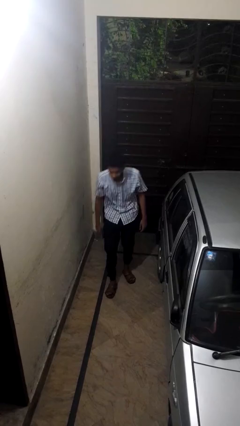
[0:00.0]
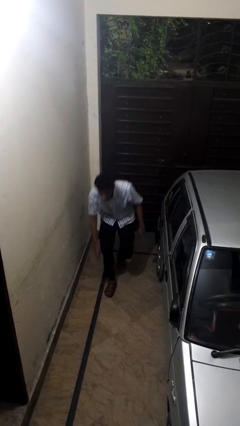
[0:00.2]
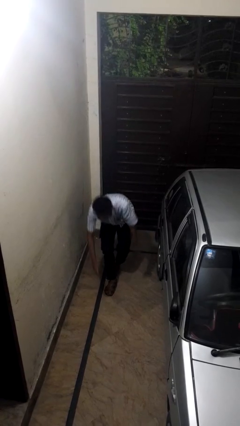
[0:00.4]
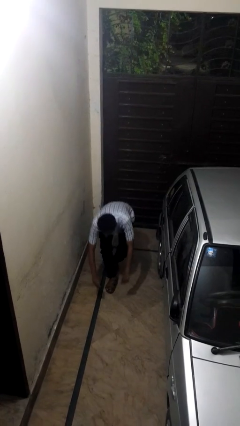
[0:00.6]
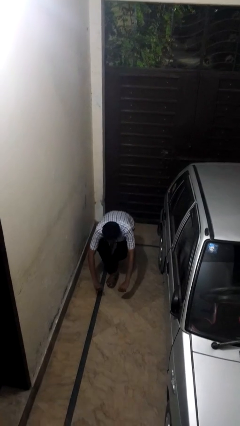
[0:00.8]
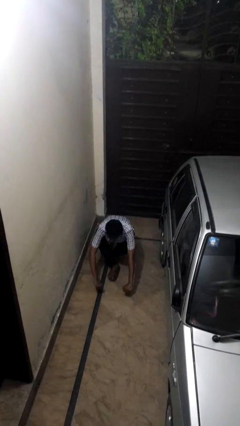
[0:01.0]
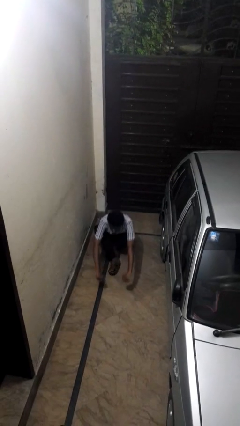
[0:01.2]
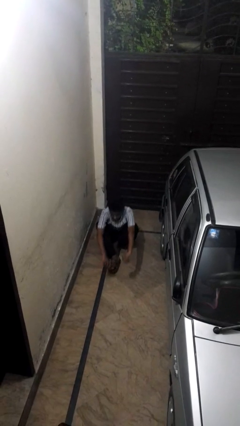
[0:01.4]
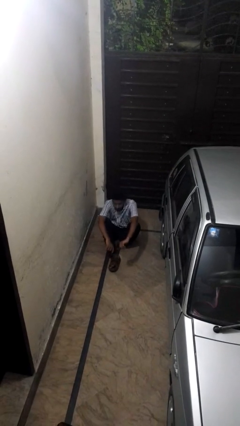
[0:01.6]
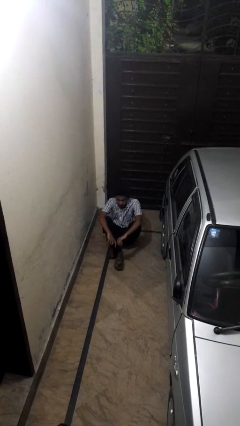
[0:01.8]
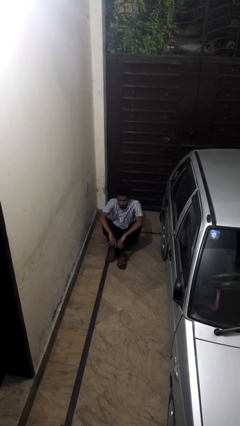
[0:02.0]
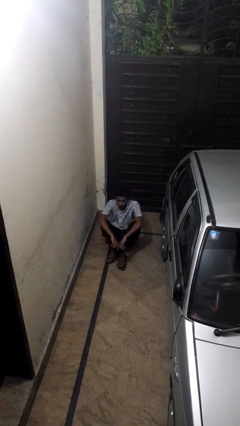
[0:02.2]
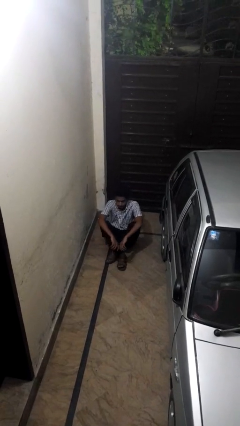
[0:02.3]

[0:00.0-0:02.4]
person sits crisscross

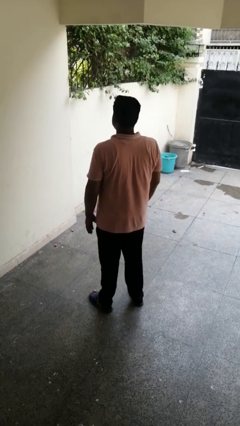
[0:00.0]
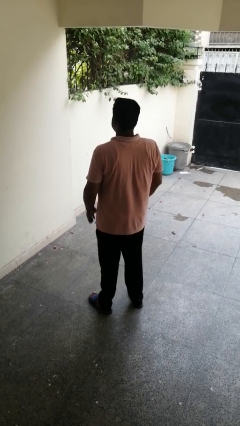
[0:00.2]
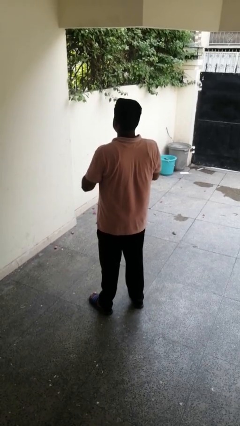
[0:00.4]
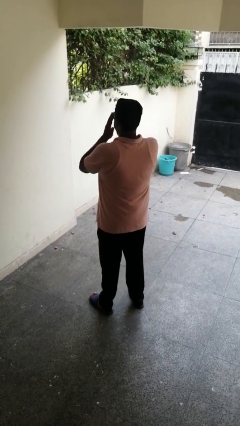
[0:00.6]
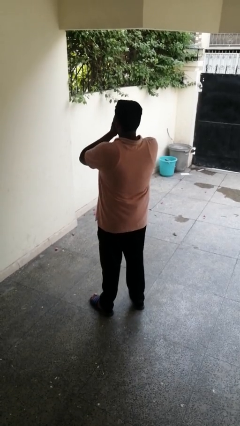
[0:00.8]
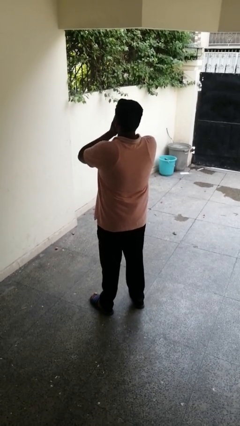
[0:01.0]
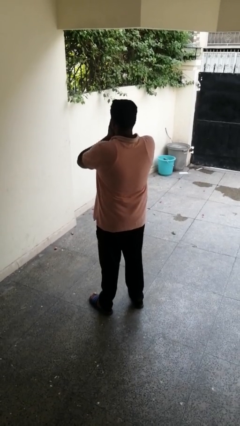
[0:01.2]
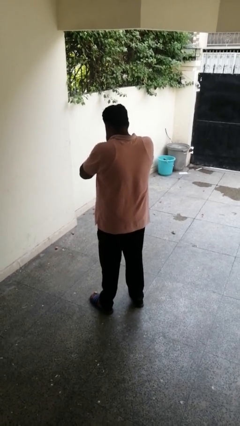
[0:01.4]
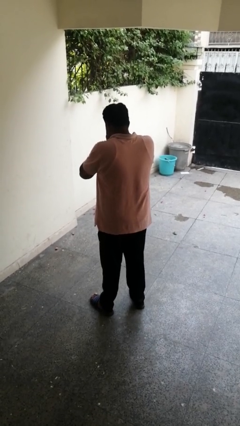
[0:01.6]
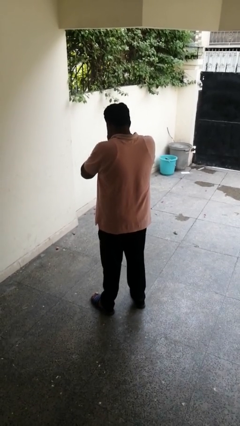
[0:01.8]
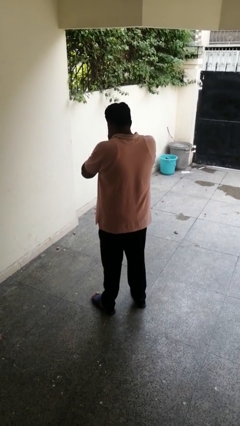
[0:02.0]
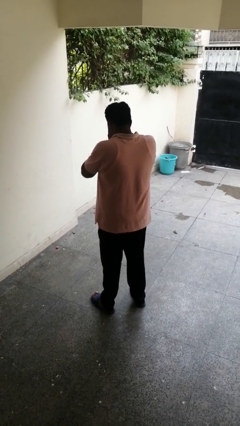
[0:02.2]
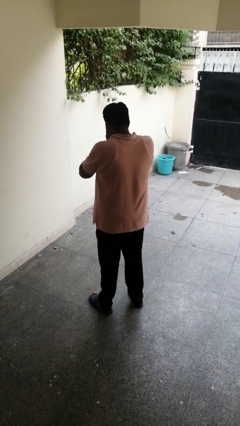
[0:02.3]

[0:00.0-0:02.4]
person sneezes into hand

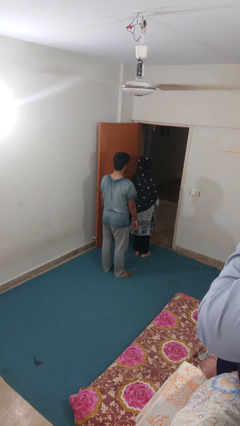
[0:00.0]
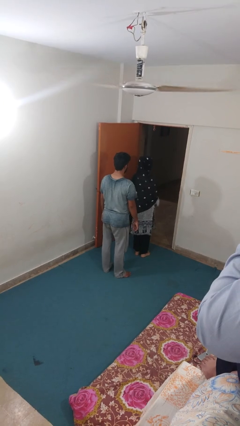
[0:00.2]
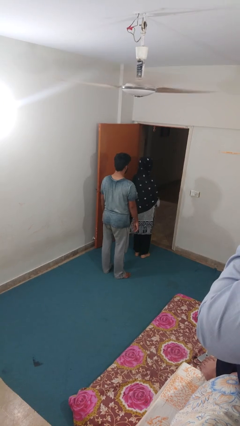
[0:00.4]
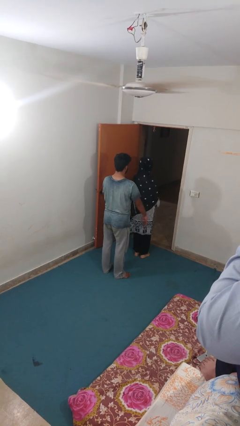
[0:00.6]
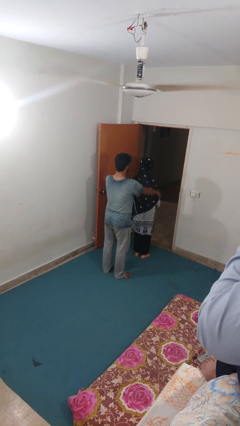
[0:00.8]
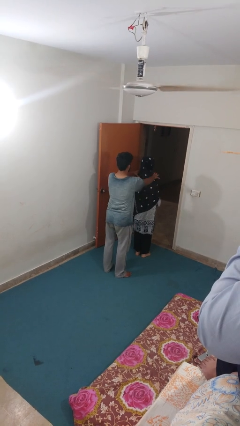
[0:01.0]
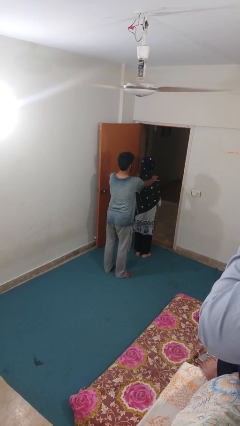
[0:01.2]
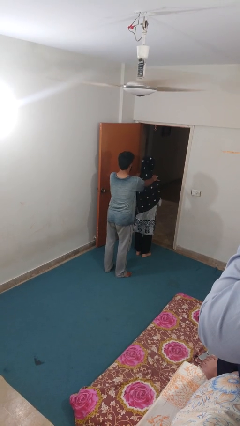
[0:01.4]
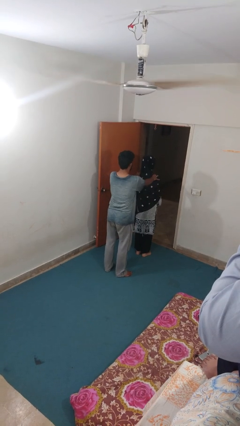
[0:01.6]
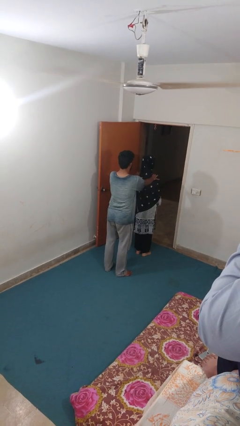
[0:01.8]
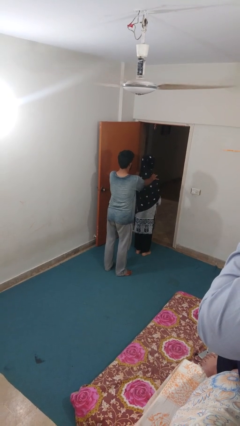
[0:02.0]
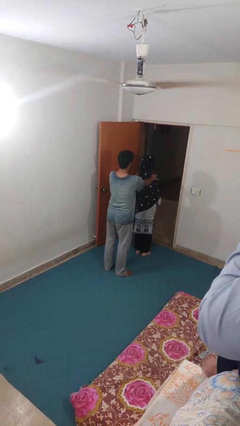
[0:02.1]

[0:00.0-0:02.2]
person grabs person by shoulder

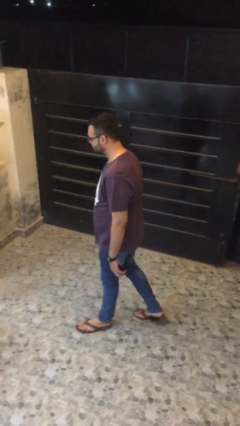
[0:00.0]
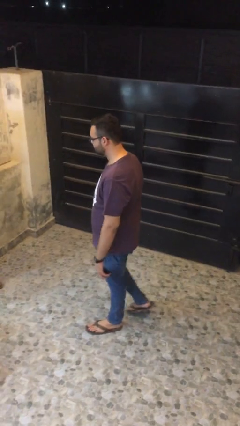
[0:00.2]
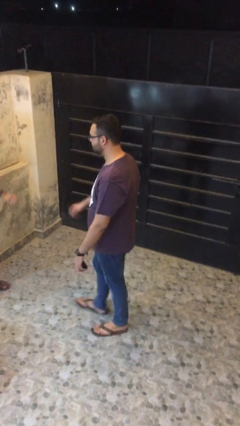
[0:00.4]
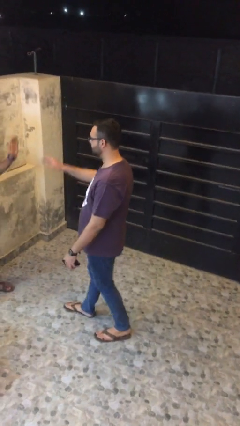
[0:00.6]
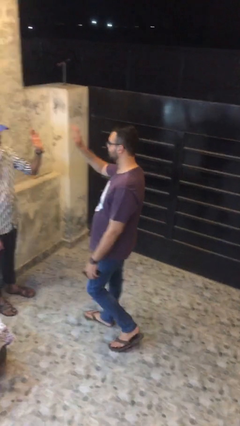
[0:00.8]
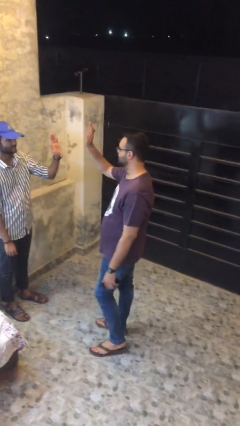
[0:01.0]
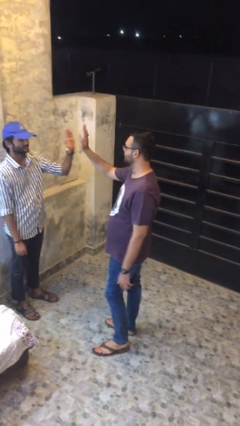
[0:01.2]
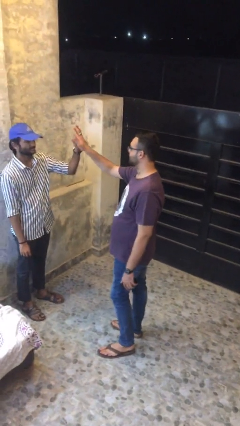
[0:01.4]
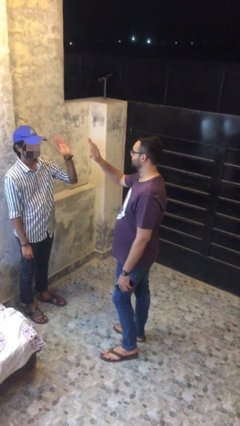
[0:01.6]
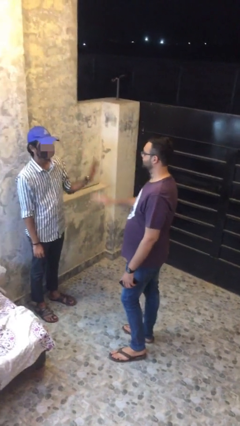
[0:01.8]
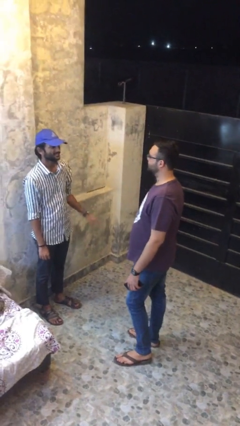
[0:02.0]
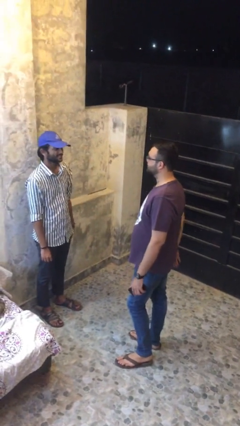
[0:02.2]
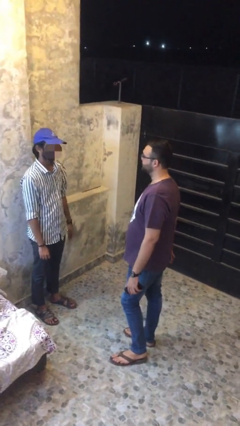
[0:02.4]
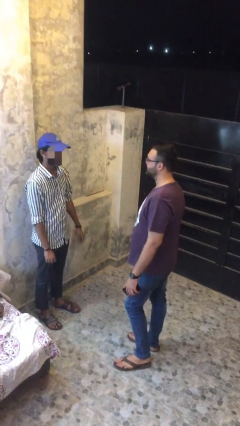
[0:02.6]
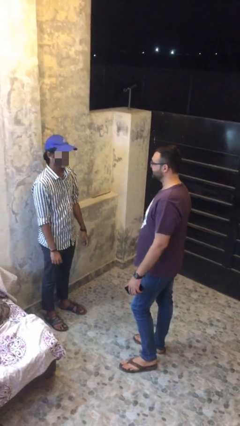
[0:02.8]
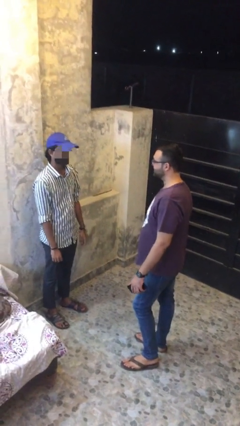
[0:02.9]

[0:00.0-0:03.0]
person highfives hand

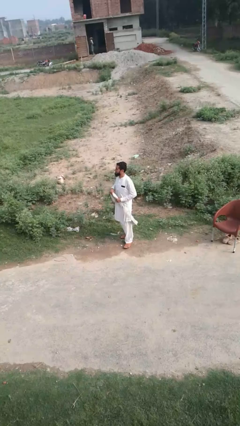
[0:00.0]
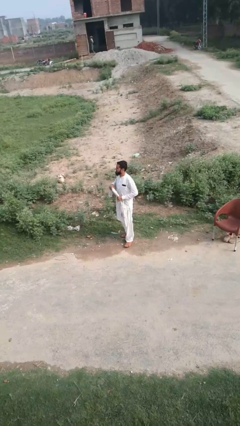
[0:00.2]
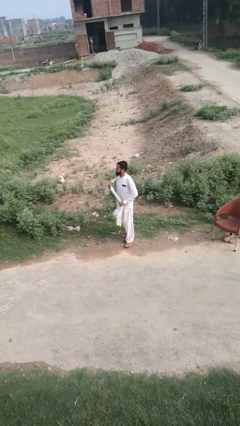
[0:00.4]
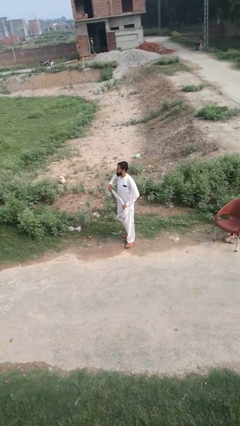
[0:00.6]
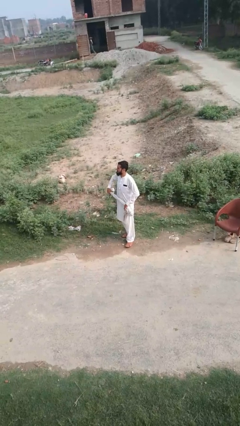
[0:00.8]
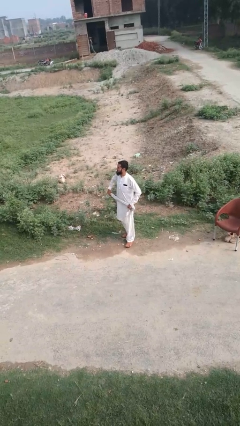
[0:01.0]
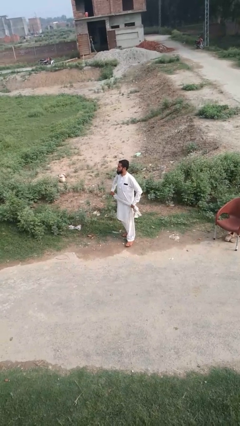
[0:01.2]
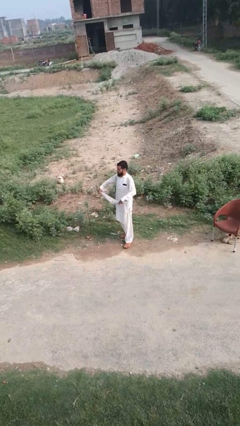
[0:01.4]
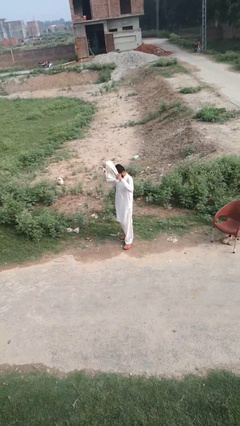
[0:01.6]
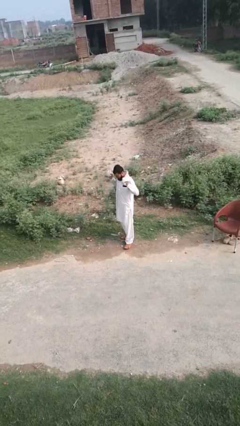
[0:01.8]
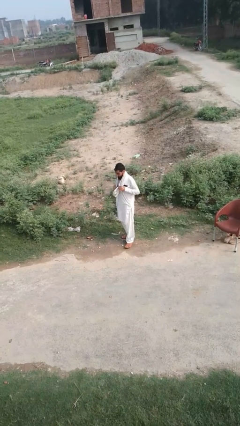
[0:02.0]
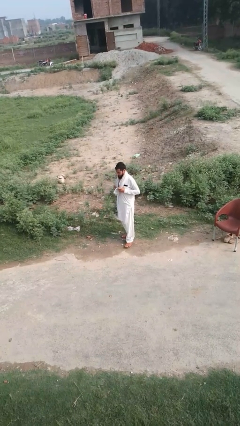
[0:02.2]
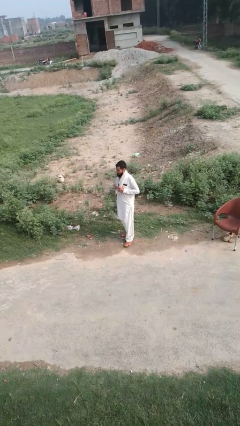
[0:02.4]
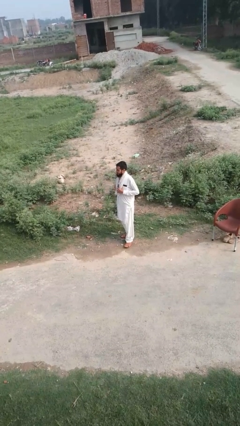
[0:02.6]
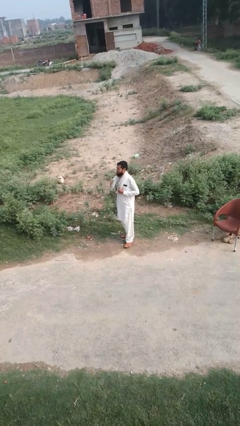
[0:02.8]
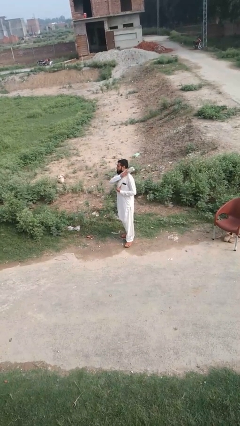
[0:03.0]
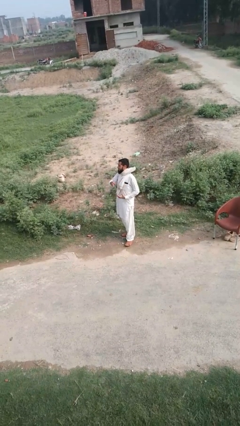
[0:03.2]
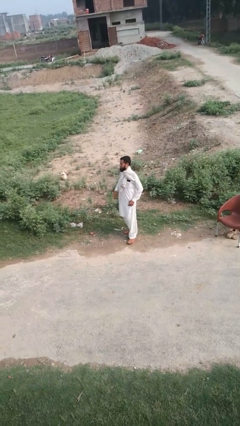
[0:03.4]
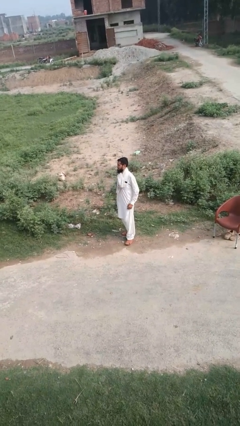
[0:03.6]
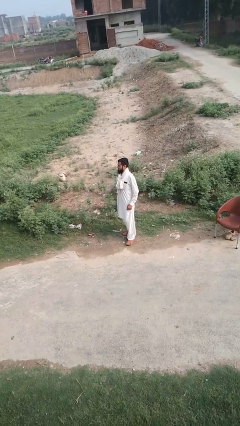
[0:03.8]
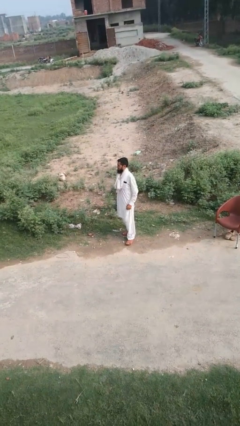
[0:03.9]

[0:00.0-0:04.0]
person puts on scarf

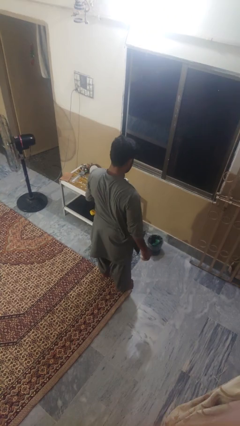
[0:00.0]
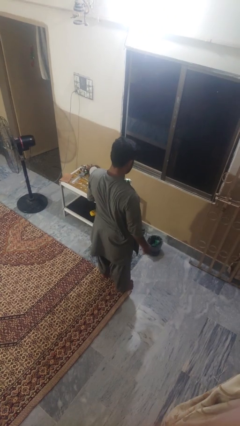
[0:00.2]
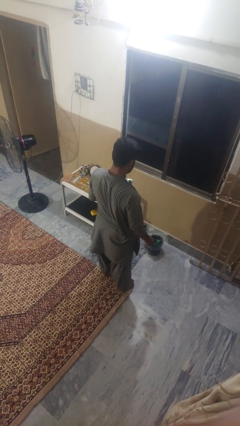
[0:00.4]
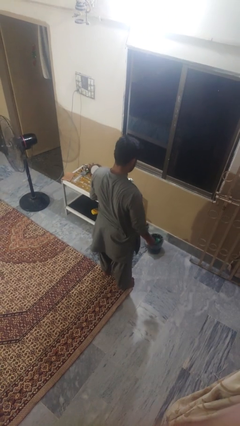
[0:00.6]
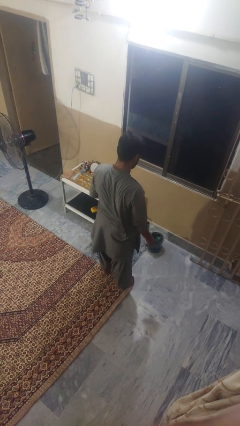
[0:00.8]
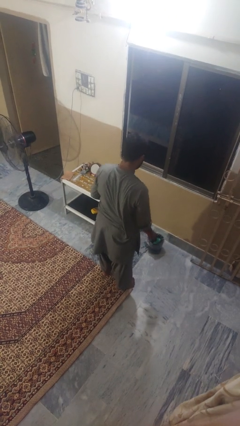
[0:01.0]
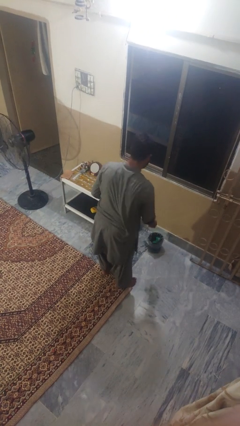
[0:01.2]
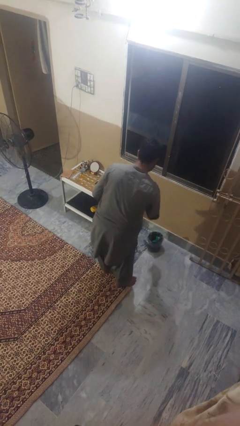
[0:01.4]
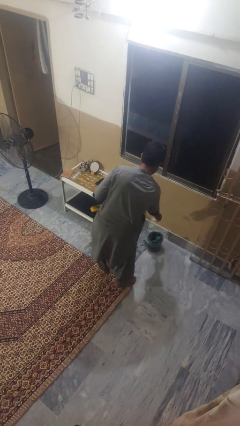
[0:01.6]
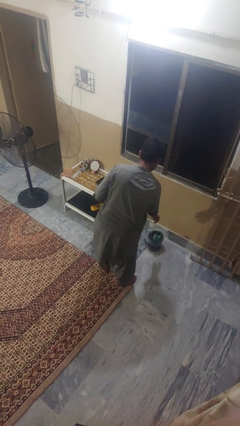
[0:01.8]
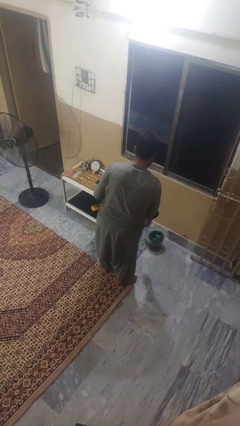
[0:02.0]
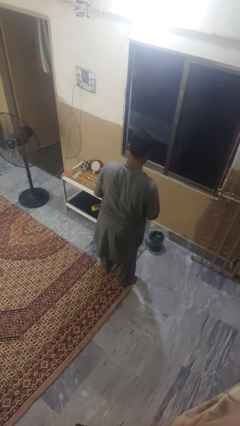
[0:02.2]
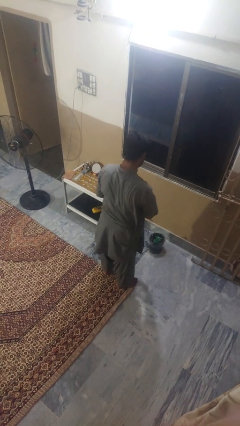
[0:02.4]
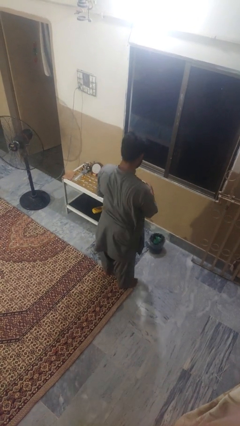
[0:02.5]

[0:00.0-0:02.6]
person discards trash

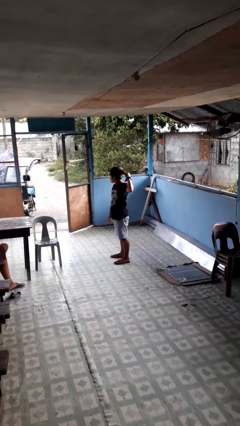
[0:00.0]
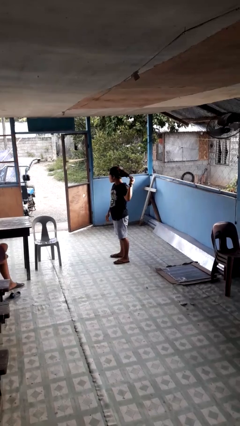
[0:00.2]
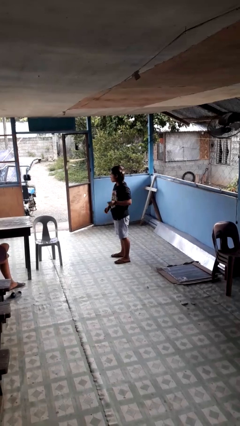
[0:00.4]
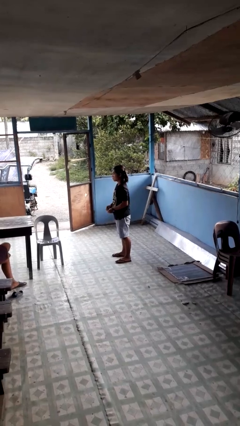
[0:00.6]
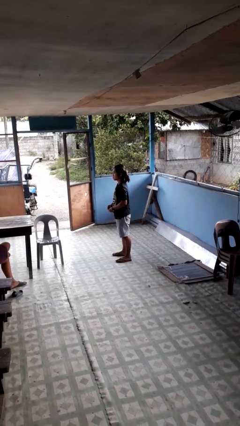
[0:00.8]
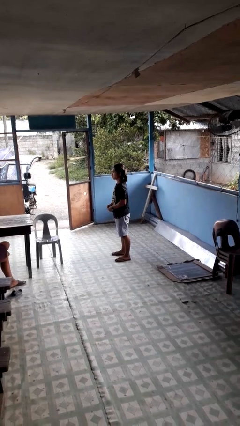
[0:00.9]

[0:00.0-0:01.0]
person takes off hairtie
